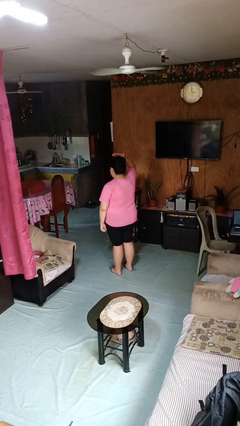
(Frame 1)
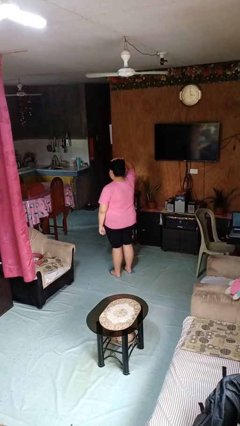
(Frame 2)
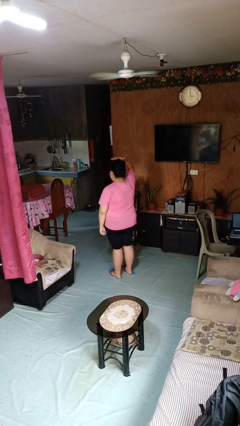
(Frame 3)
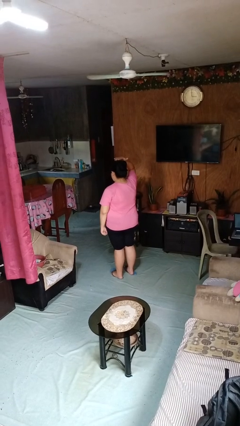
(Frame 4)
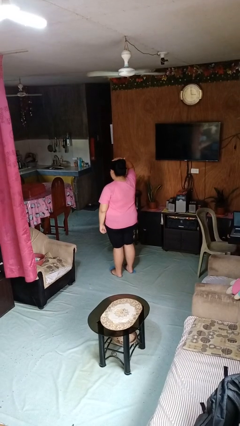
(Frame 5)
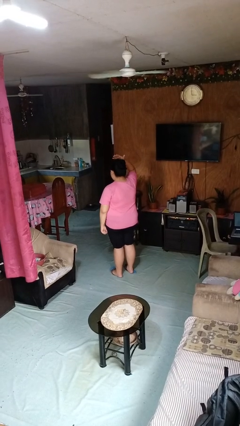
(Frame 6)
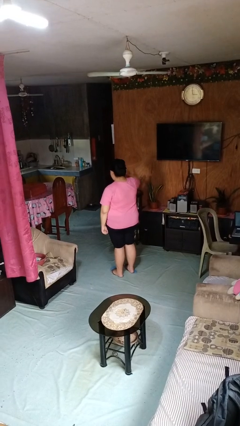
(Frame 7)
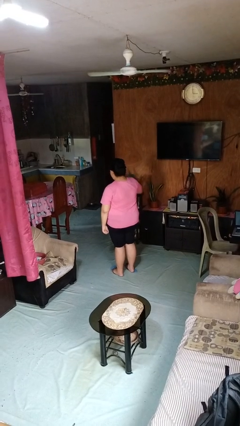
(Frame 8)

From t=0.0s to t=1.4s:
person pats head

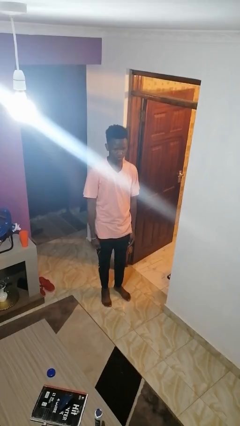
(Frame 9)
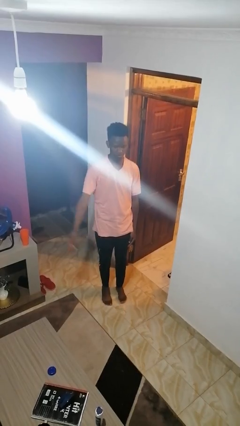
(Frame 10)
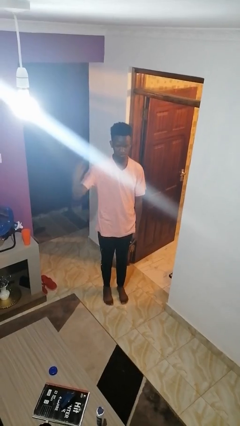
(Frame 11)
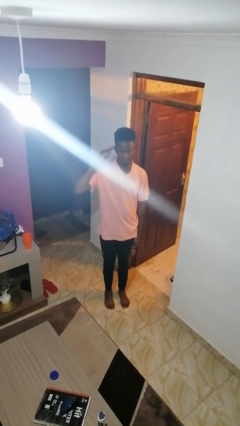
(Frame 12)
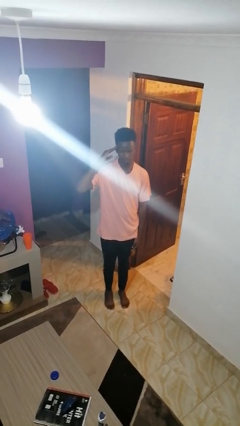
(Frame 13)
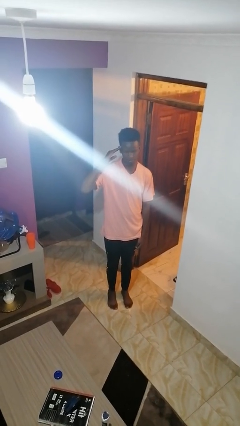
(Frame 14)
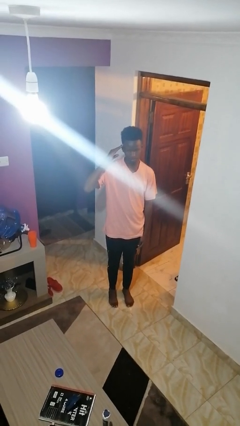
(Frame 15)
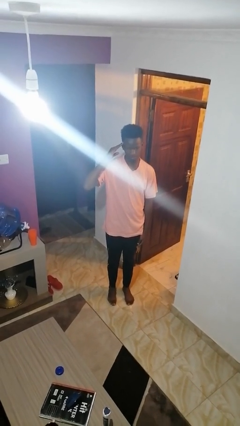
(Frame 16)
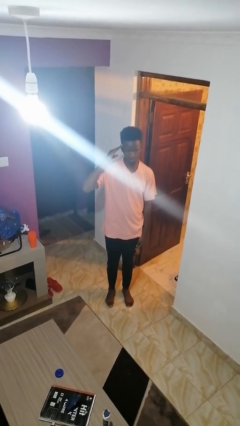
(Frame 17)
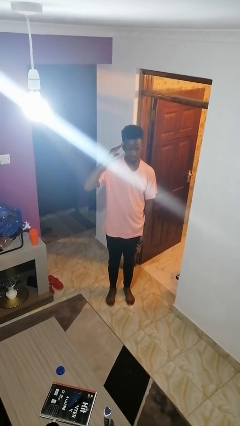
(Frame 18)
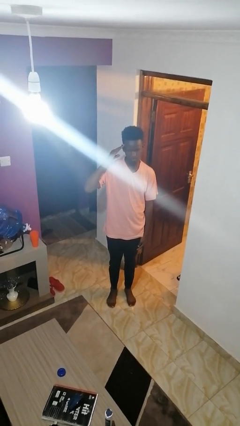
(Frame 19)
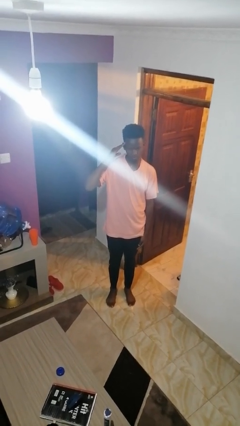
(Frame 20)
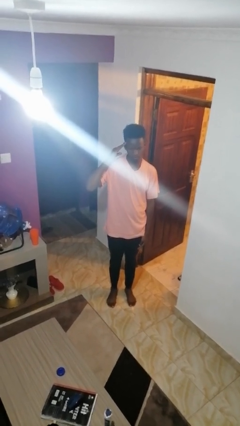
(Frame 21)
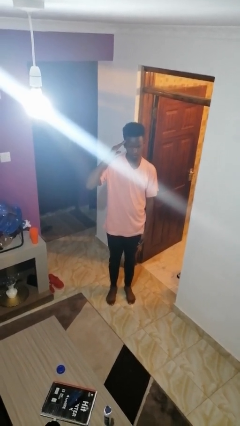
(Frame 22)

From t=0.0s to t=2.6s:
person salutes

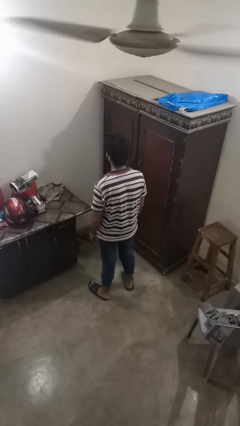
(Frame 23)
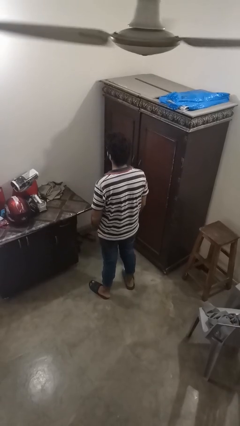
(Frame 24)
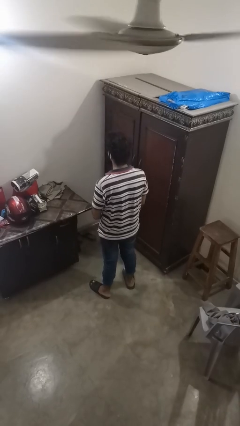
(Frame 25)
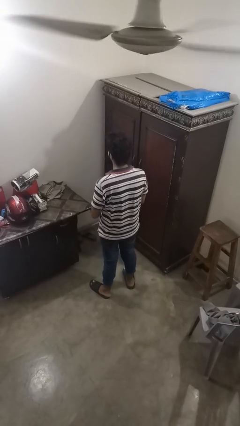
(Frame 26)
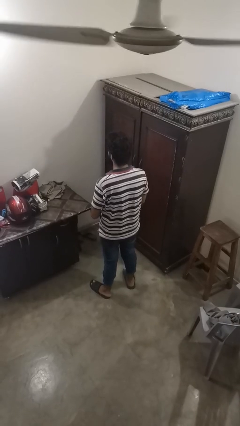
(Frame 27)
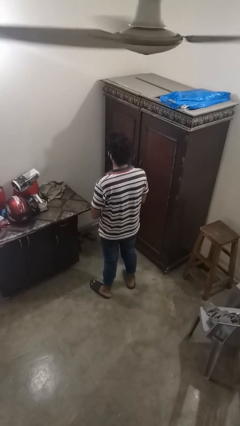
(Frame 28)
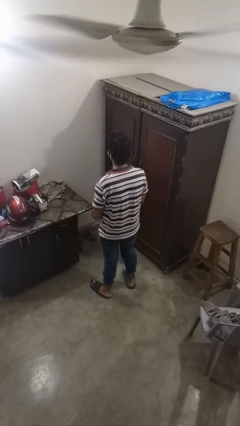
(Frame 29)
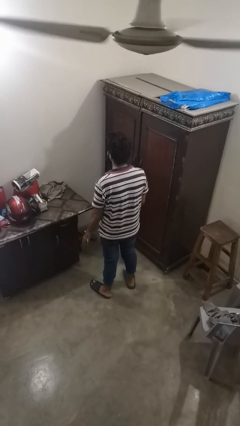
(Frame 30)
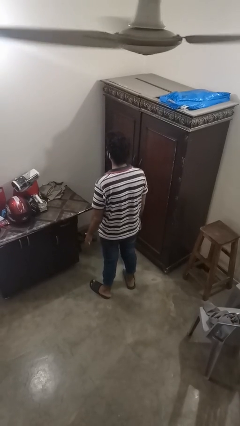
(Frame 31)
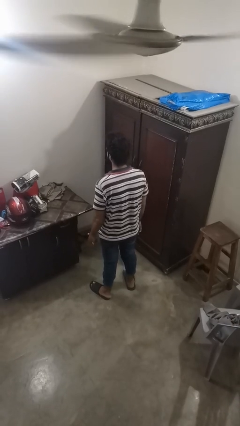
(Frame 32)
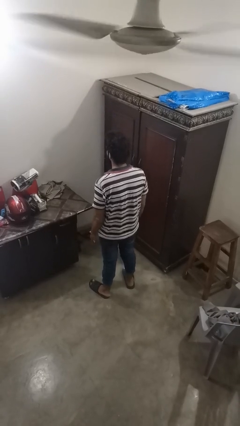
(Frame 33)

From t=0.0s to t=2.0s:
person puts on ring

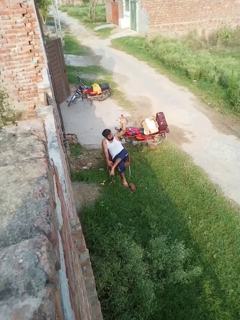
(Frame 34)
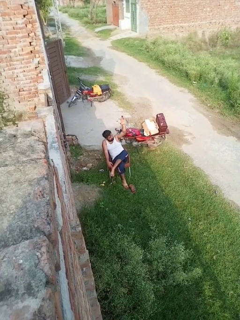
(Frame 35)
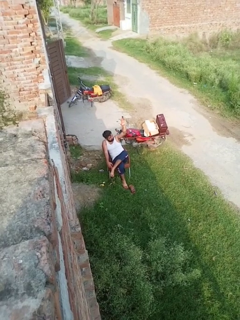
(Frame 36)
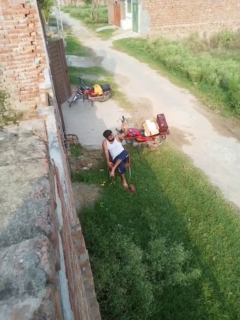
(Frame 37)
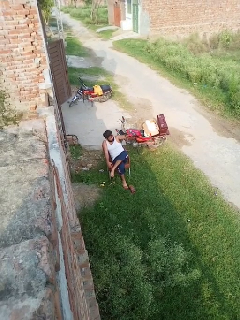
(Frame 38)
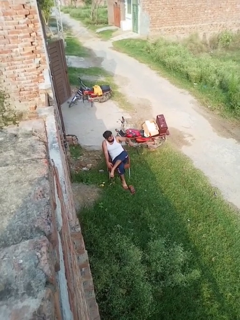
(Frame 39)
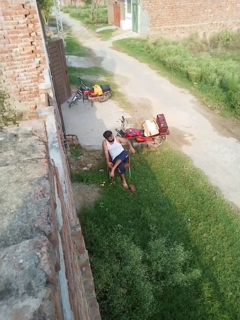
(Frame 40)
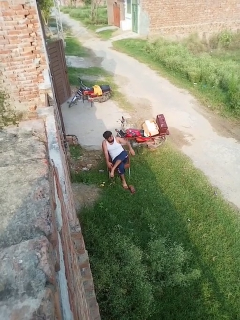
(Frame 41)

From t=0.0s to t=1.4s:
person gestures swipe down

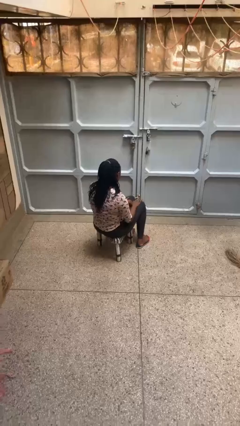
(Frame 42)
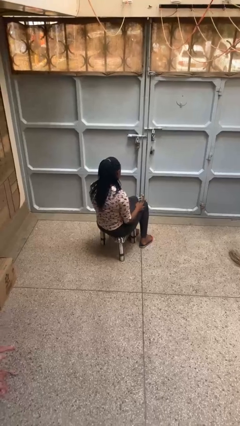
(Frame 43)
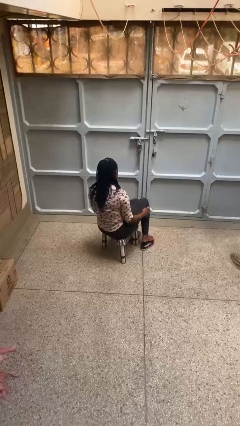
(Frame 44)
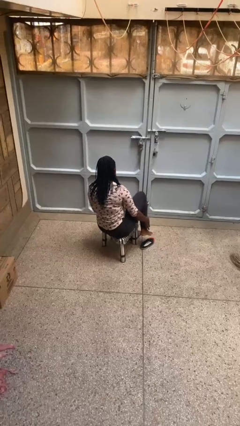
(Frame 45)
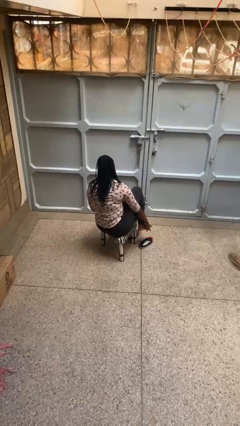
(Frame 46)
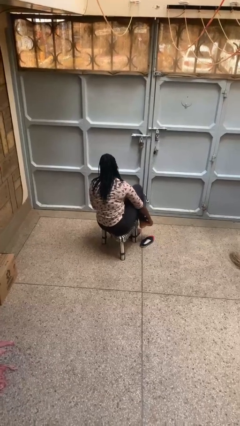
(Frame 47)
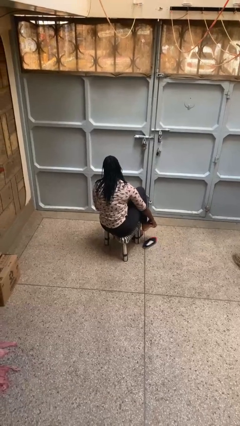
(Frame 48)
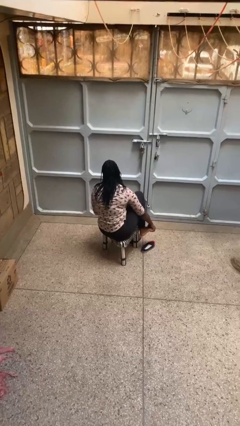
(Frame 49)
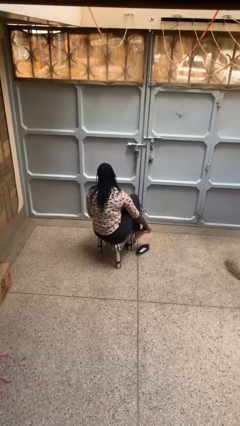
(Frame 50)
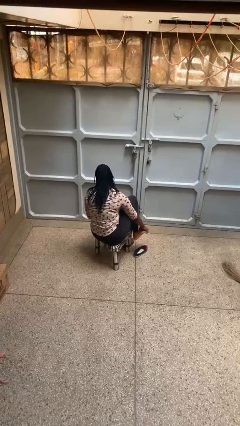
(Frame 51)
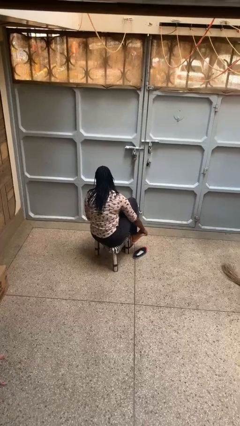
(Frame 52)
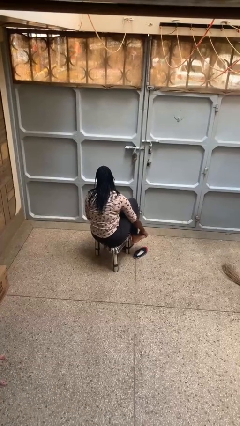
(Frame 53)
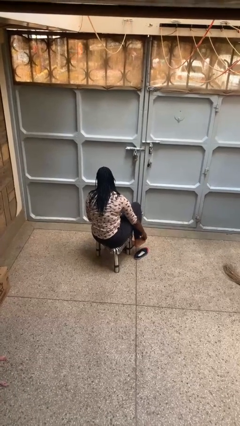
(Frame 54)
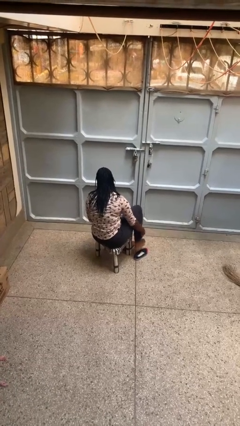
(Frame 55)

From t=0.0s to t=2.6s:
person rubs foot

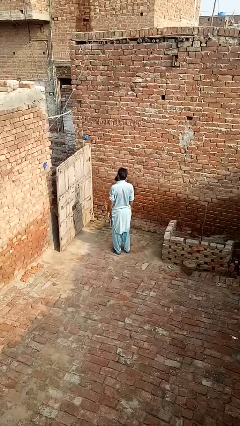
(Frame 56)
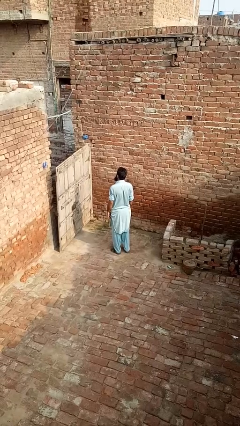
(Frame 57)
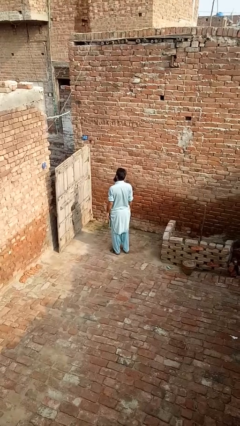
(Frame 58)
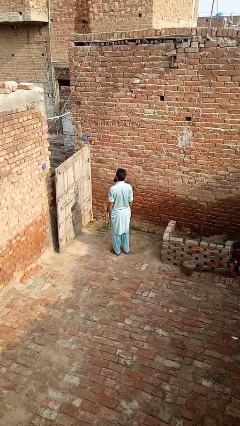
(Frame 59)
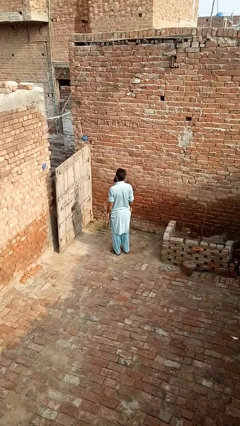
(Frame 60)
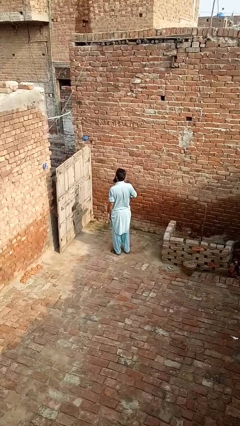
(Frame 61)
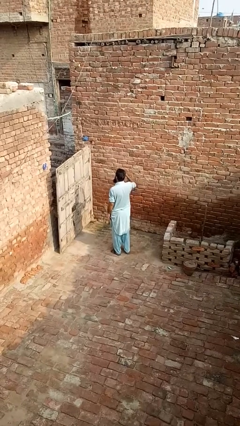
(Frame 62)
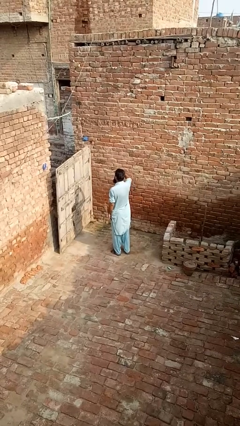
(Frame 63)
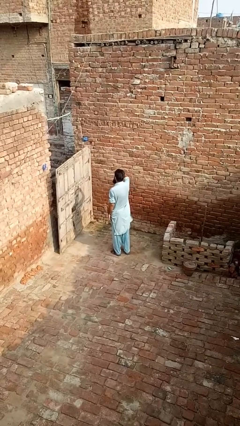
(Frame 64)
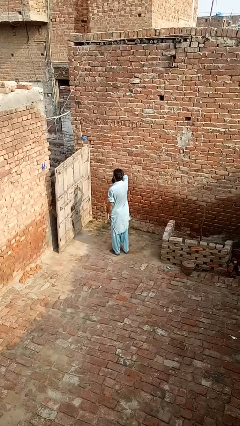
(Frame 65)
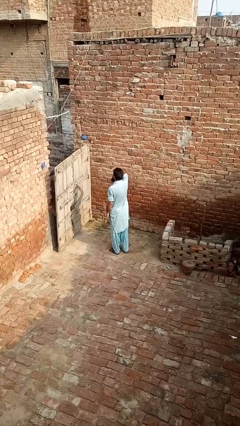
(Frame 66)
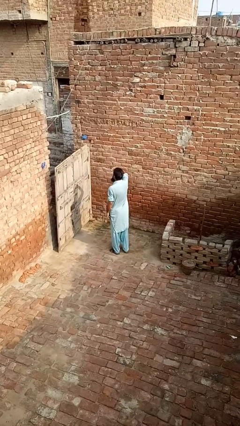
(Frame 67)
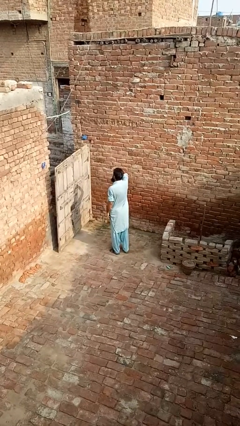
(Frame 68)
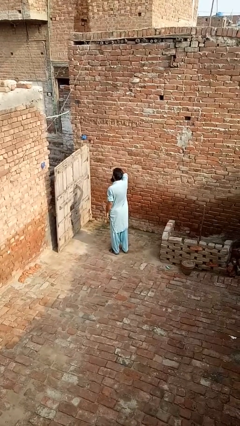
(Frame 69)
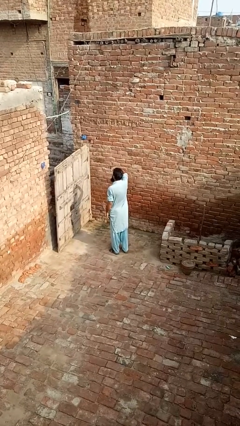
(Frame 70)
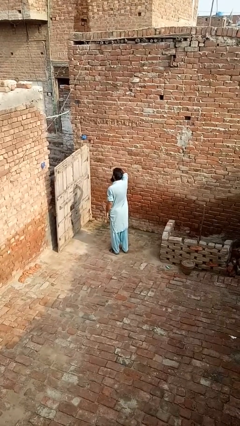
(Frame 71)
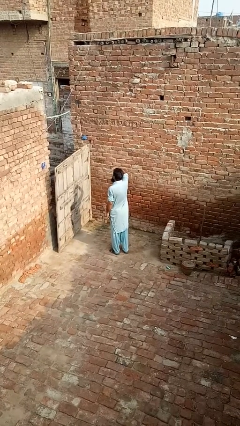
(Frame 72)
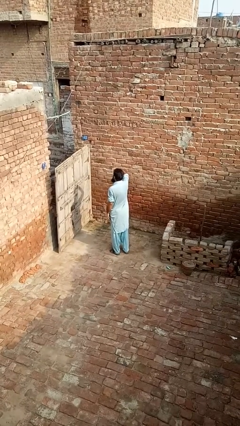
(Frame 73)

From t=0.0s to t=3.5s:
person shades eyes

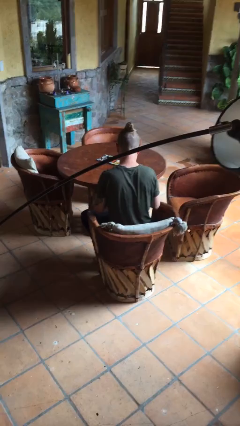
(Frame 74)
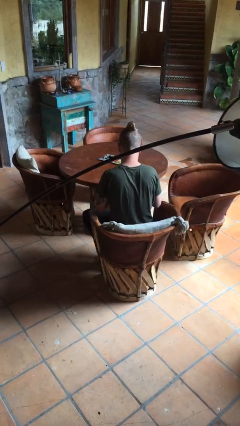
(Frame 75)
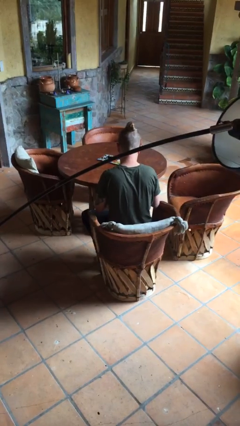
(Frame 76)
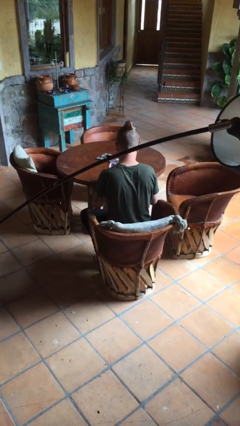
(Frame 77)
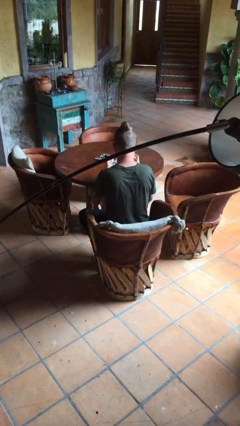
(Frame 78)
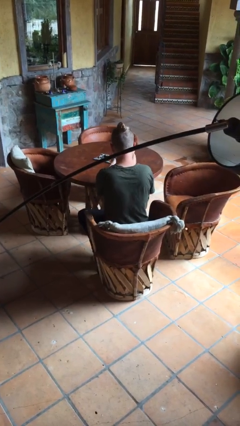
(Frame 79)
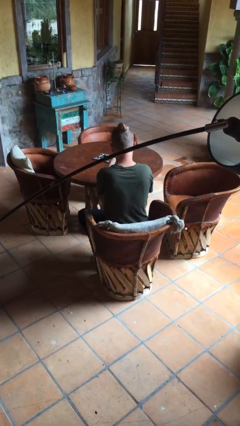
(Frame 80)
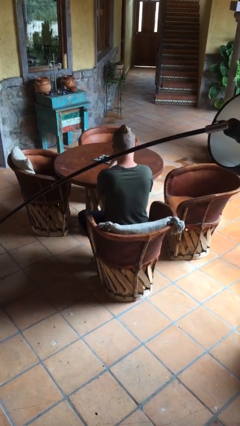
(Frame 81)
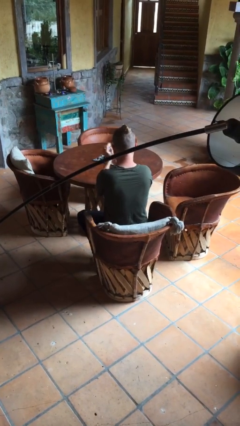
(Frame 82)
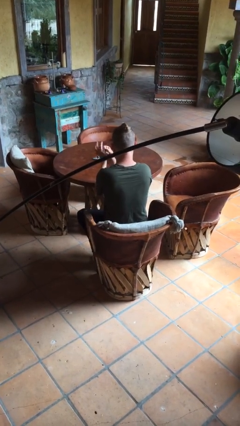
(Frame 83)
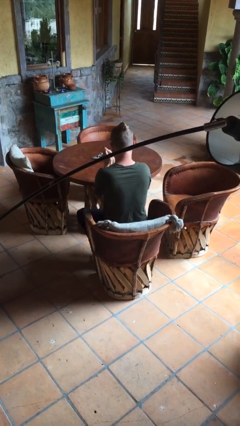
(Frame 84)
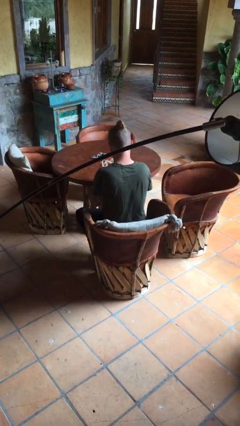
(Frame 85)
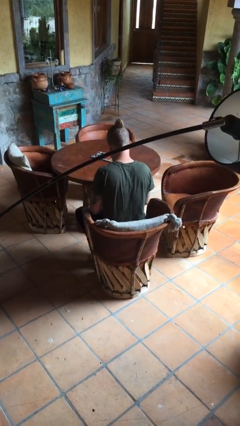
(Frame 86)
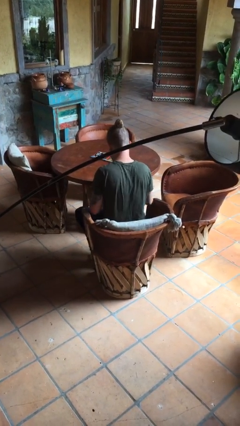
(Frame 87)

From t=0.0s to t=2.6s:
person crumples paper

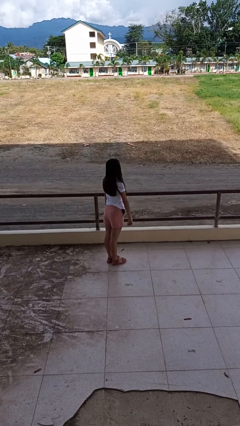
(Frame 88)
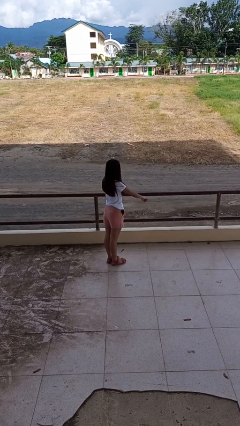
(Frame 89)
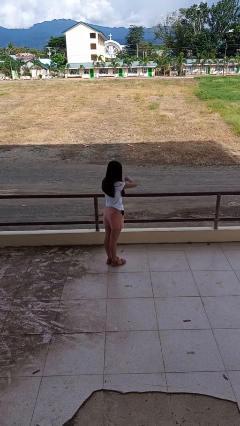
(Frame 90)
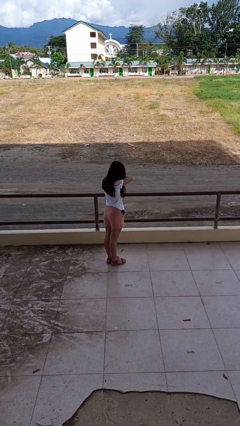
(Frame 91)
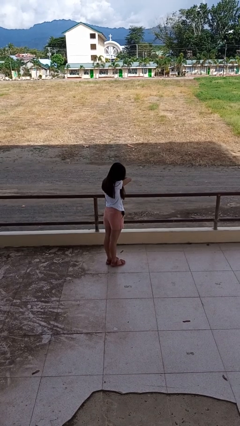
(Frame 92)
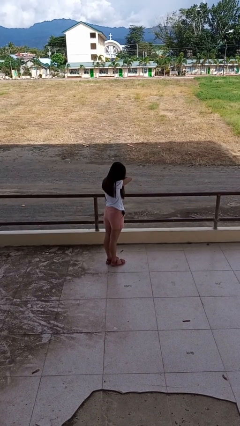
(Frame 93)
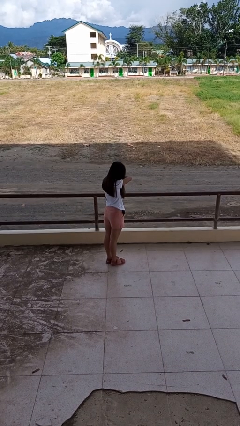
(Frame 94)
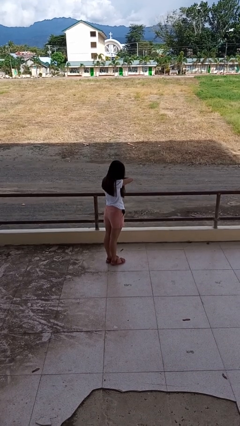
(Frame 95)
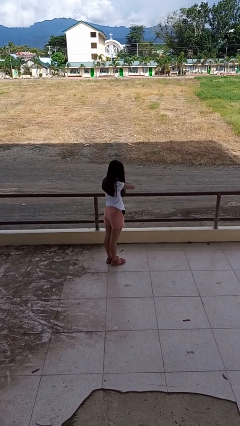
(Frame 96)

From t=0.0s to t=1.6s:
person sneezes into arm

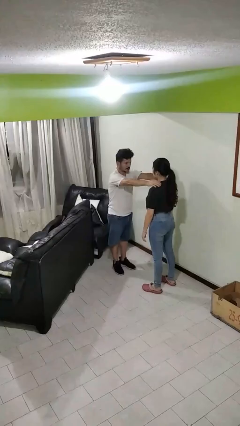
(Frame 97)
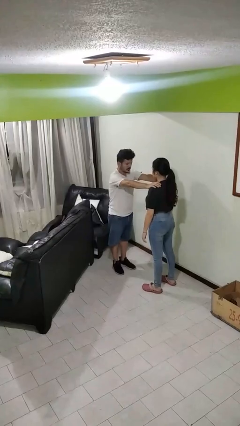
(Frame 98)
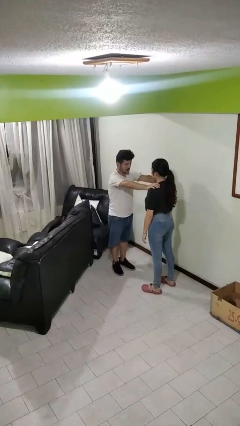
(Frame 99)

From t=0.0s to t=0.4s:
person grabs person by shoulder
